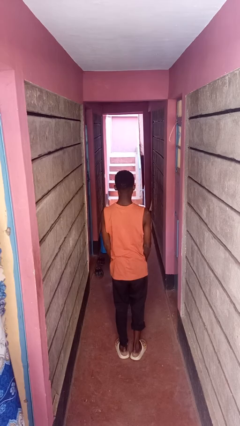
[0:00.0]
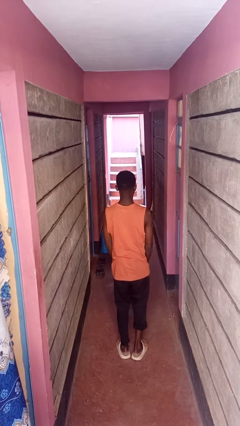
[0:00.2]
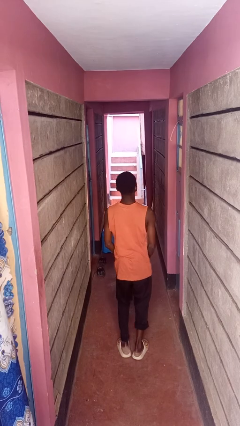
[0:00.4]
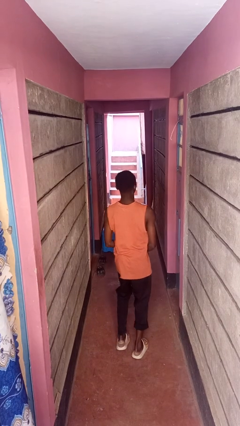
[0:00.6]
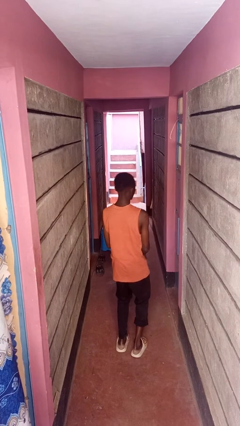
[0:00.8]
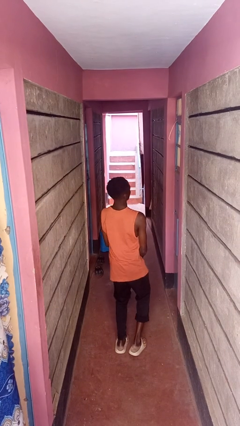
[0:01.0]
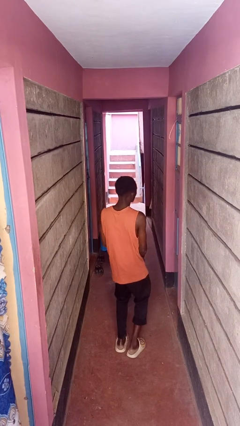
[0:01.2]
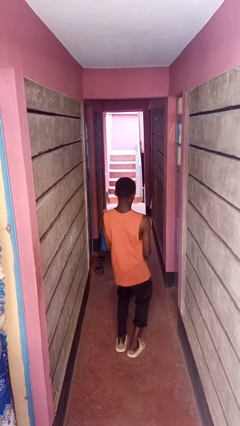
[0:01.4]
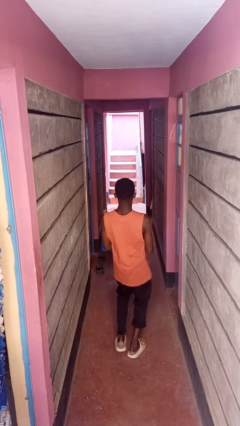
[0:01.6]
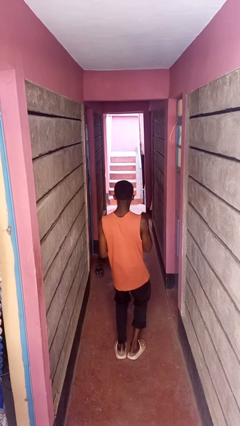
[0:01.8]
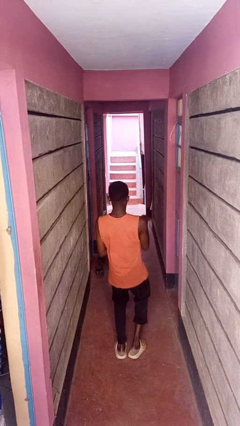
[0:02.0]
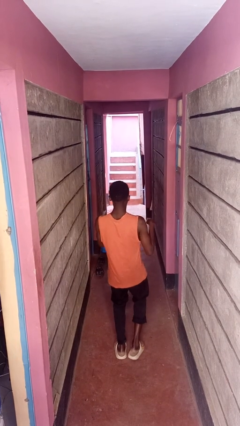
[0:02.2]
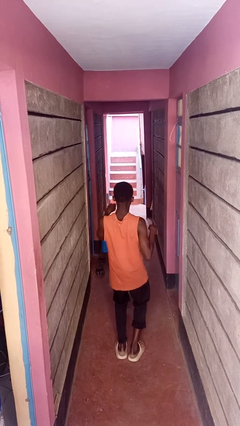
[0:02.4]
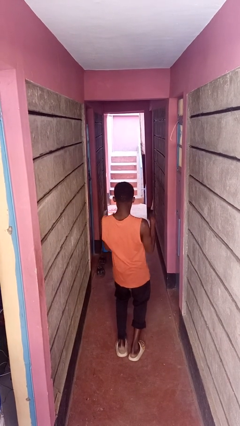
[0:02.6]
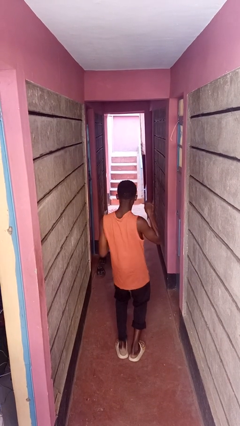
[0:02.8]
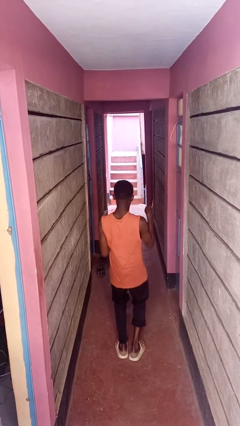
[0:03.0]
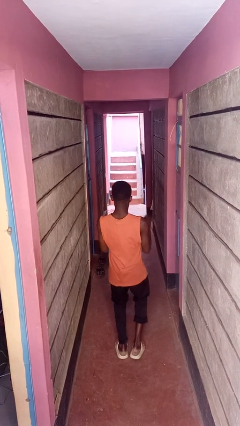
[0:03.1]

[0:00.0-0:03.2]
person dances in place

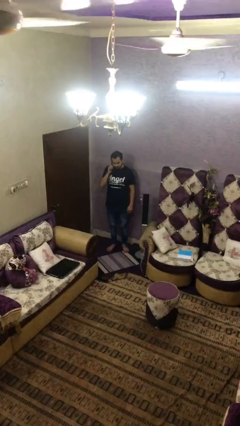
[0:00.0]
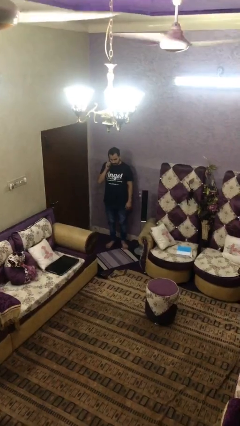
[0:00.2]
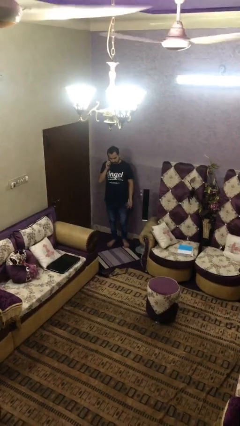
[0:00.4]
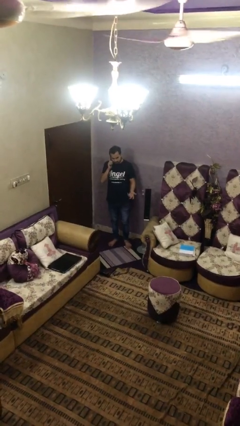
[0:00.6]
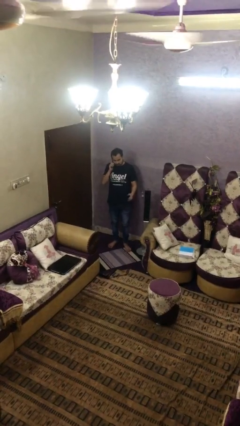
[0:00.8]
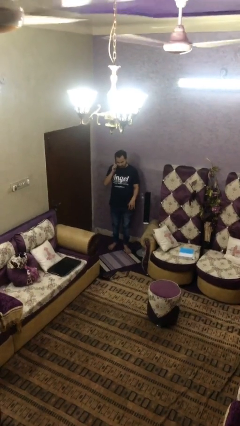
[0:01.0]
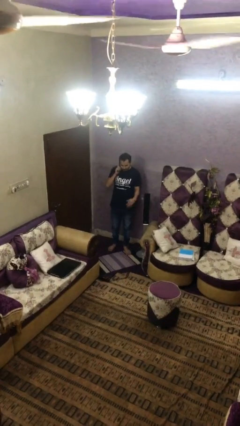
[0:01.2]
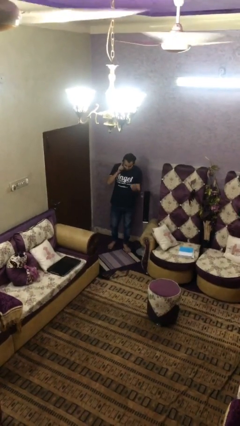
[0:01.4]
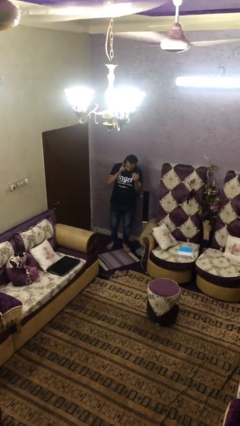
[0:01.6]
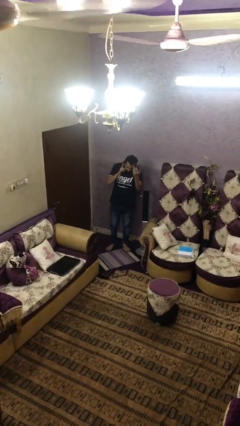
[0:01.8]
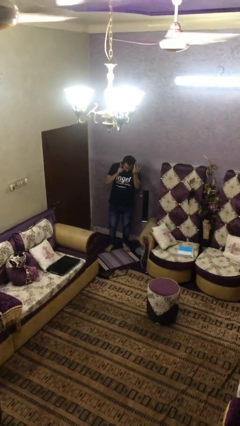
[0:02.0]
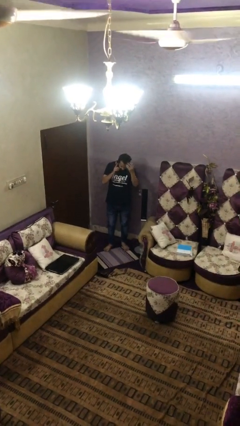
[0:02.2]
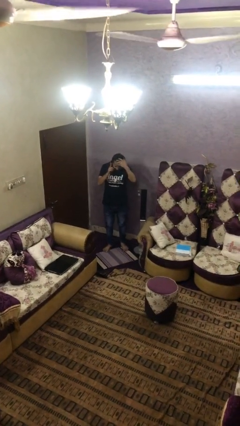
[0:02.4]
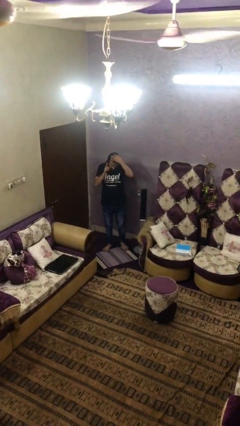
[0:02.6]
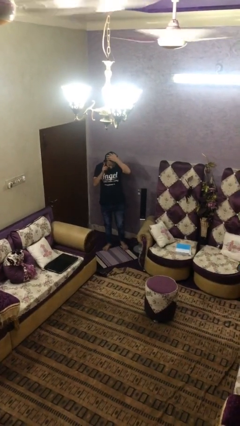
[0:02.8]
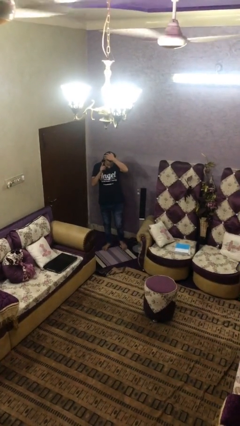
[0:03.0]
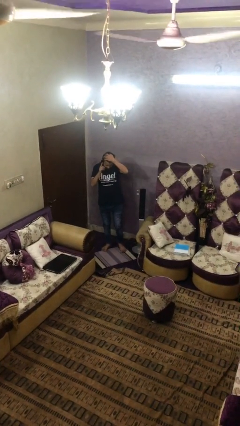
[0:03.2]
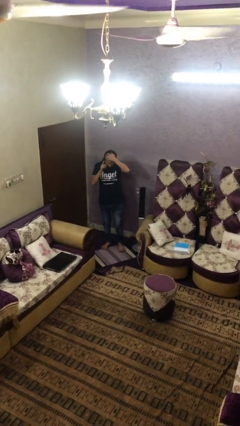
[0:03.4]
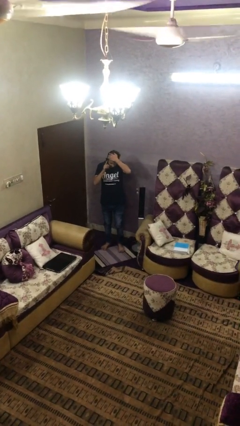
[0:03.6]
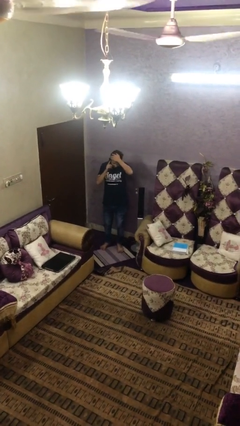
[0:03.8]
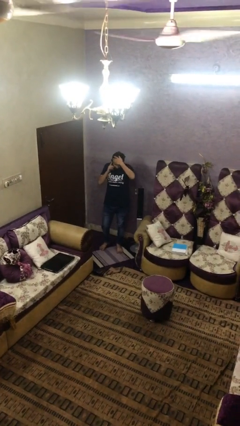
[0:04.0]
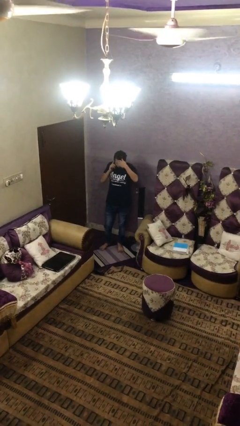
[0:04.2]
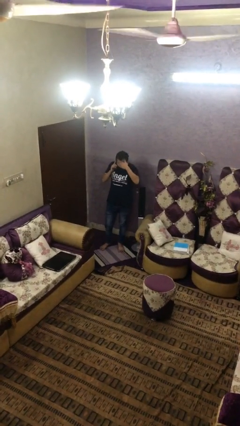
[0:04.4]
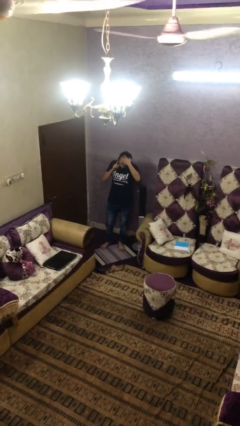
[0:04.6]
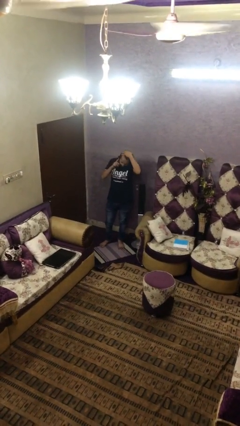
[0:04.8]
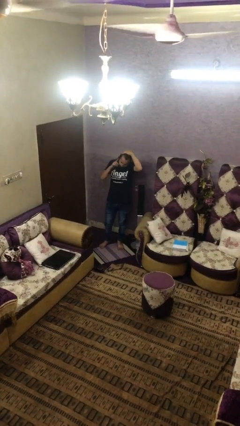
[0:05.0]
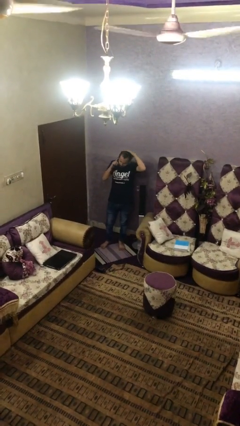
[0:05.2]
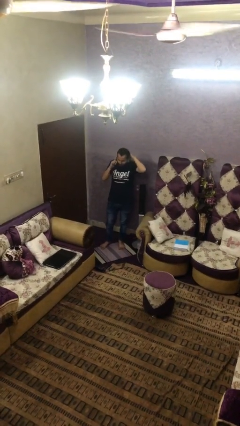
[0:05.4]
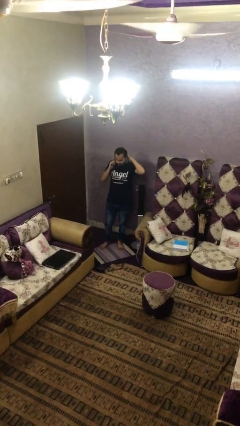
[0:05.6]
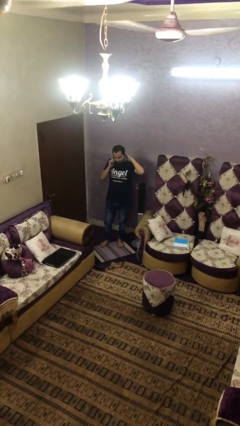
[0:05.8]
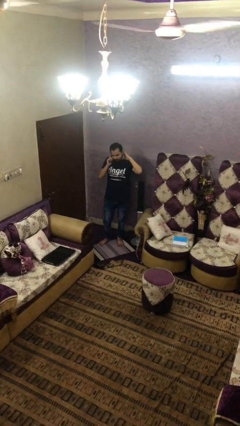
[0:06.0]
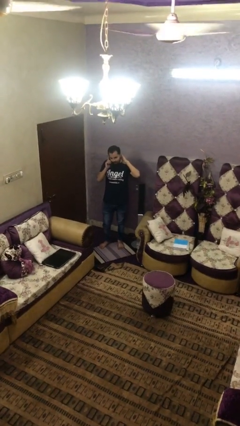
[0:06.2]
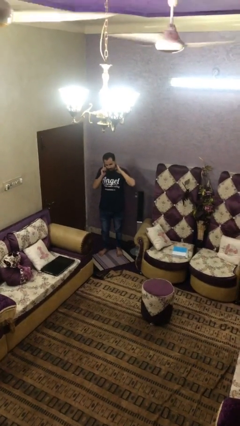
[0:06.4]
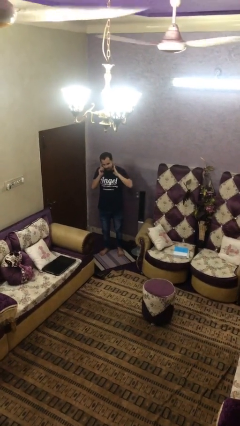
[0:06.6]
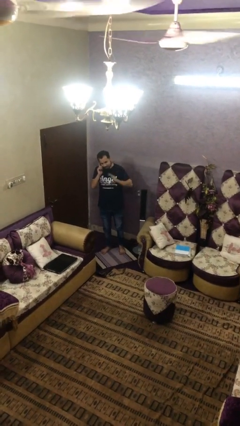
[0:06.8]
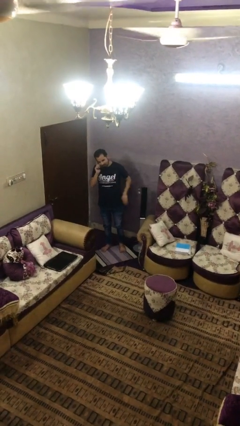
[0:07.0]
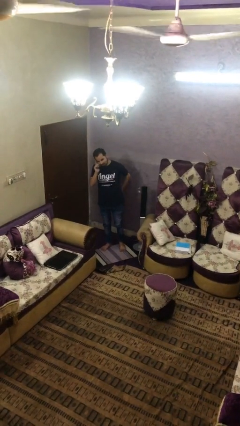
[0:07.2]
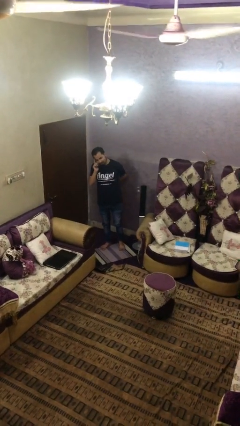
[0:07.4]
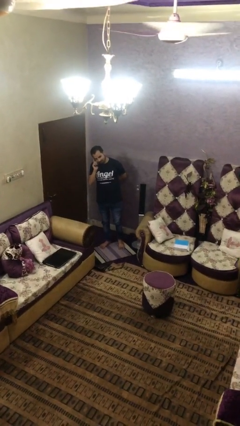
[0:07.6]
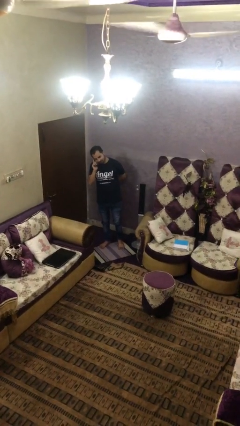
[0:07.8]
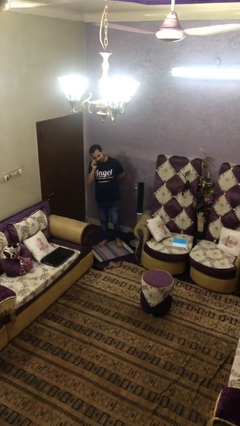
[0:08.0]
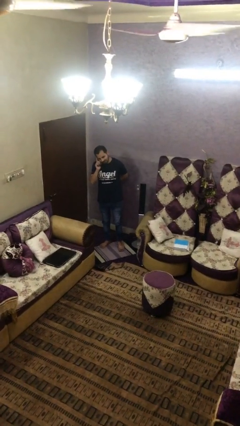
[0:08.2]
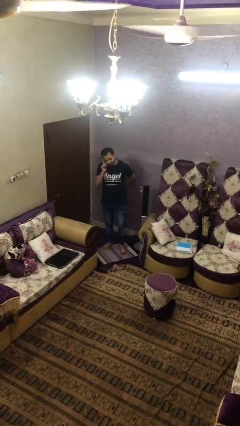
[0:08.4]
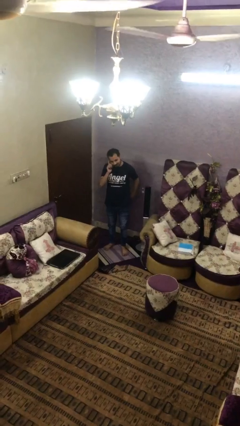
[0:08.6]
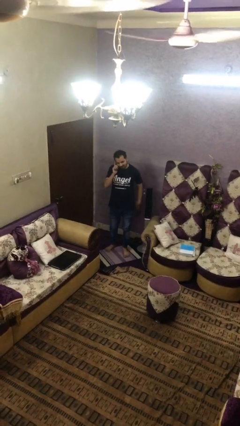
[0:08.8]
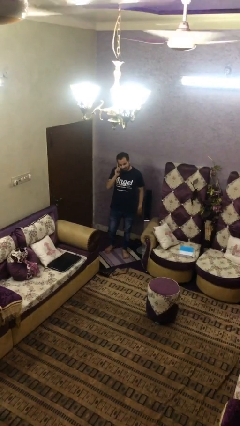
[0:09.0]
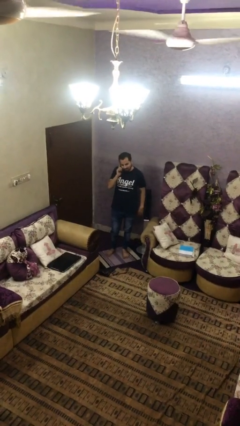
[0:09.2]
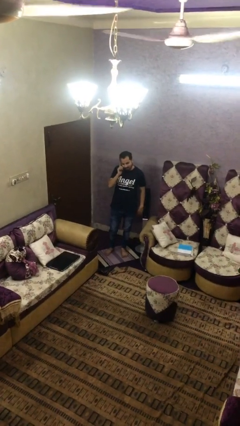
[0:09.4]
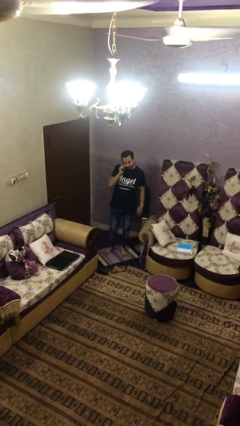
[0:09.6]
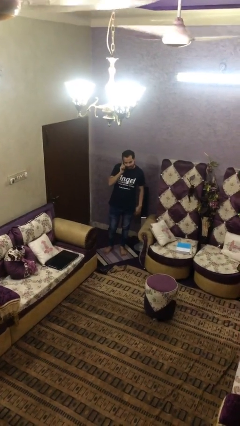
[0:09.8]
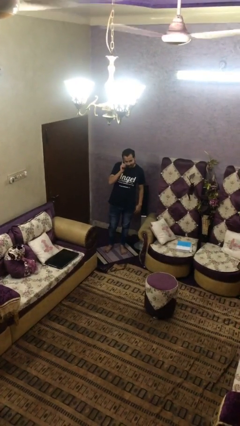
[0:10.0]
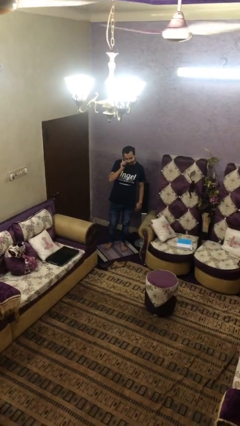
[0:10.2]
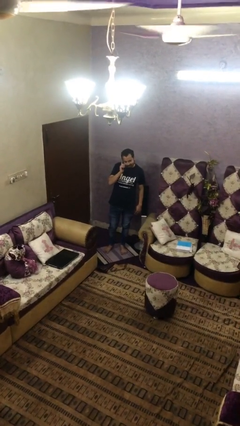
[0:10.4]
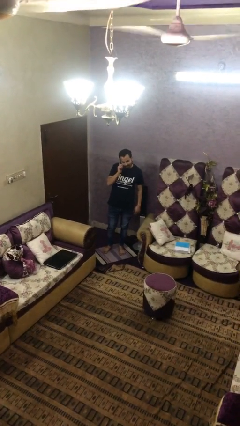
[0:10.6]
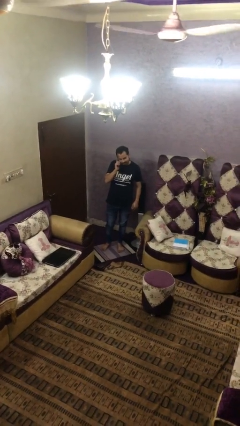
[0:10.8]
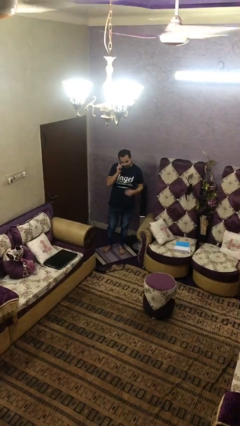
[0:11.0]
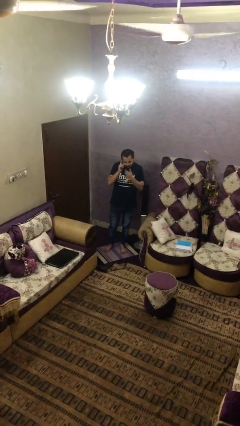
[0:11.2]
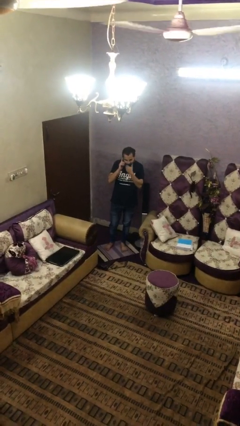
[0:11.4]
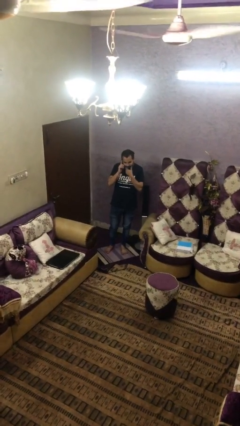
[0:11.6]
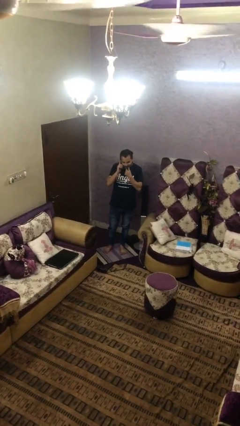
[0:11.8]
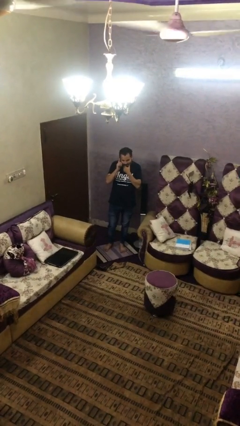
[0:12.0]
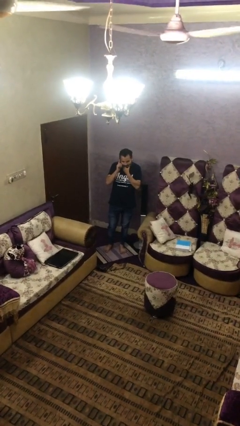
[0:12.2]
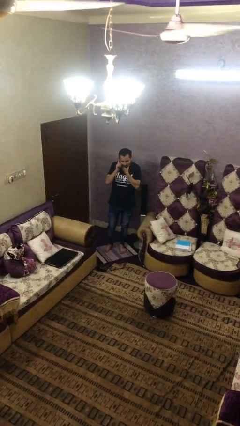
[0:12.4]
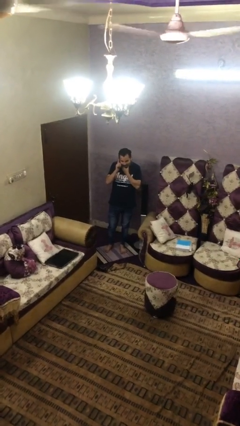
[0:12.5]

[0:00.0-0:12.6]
person talks on phone

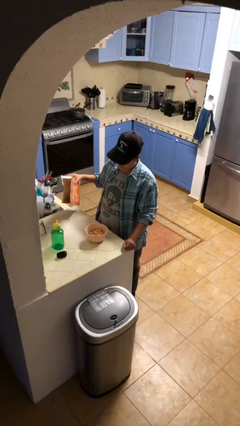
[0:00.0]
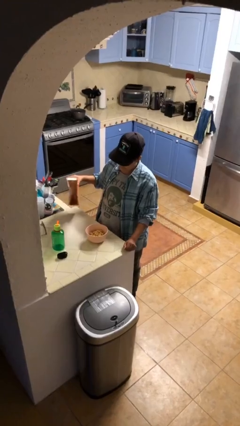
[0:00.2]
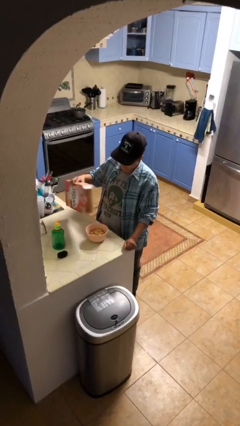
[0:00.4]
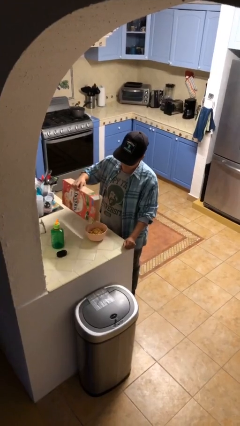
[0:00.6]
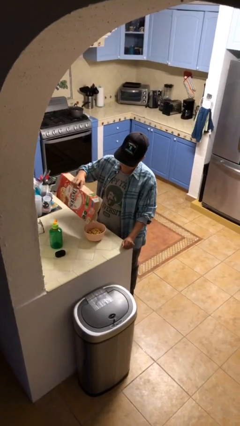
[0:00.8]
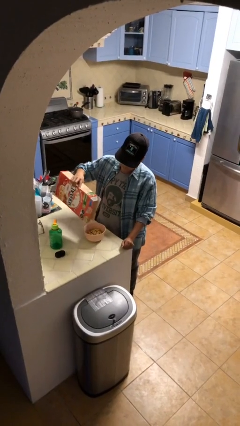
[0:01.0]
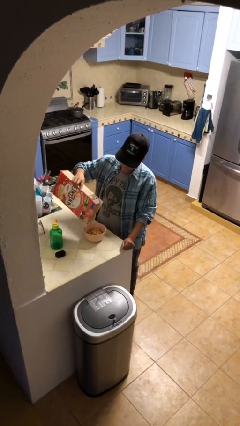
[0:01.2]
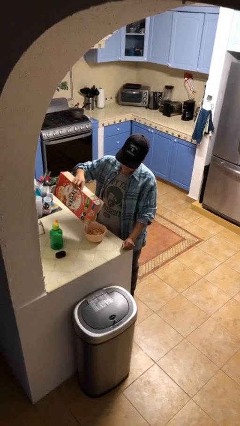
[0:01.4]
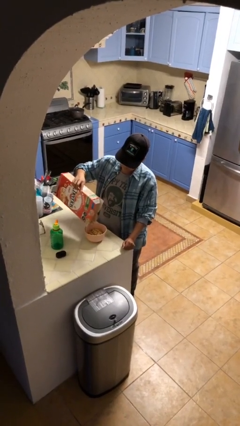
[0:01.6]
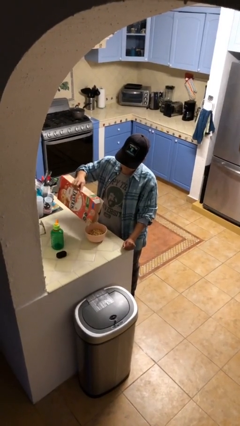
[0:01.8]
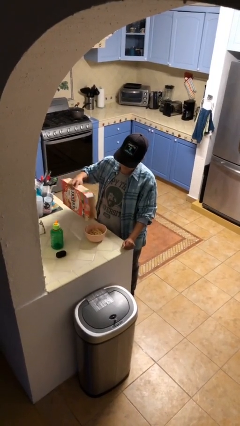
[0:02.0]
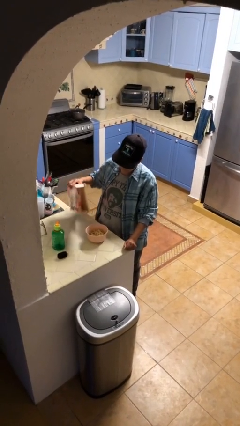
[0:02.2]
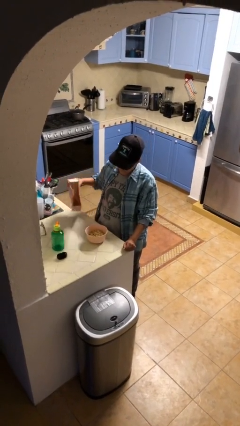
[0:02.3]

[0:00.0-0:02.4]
person pours into bowl
